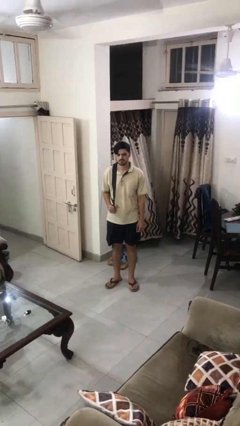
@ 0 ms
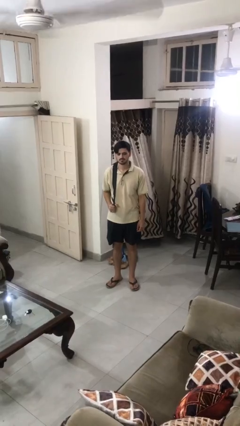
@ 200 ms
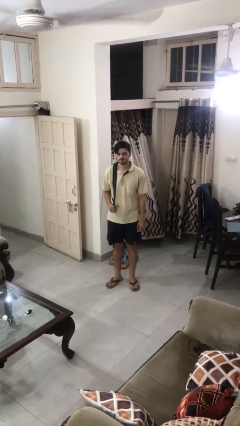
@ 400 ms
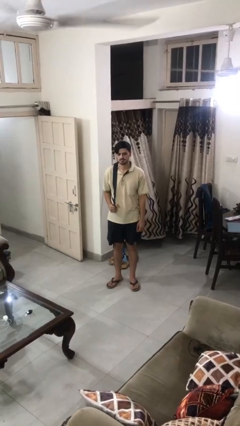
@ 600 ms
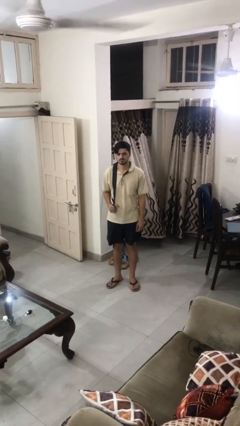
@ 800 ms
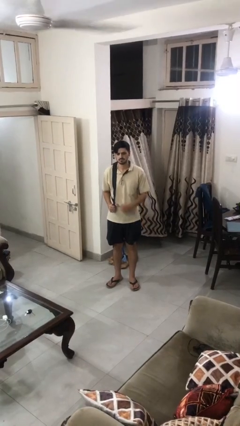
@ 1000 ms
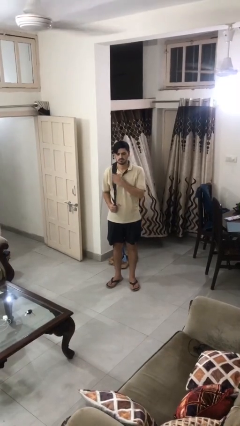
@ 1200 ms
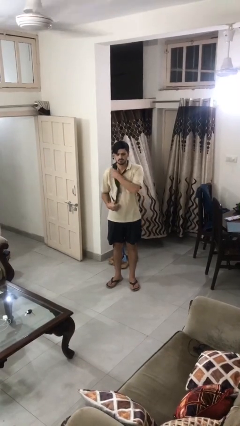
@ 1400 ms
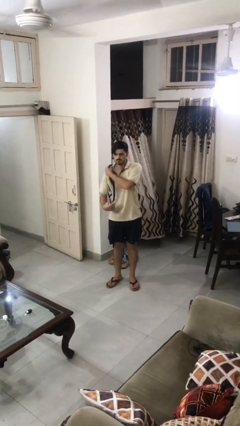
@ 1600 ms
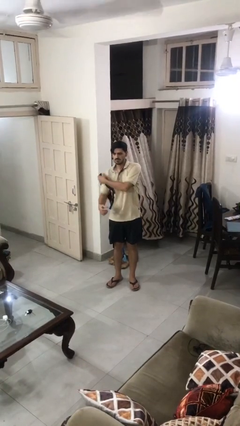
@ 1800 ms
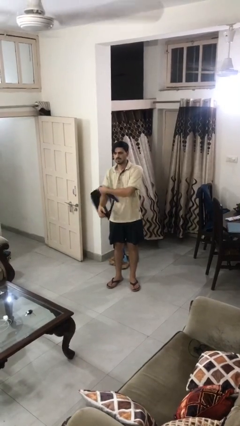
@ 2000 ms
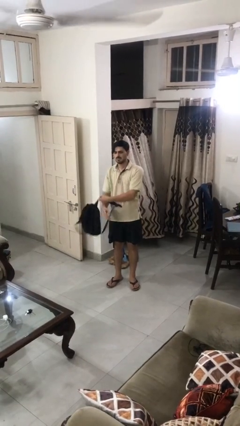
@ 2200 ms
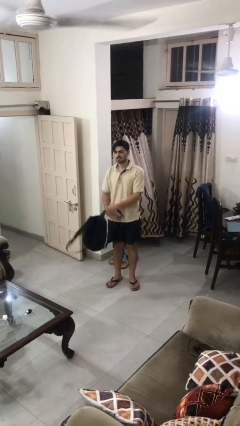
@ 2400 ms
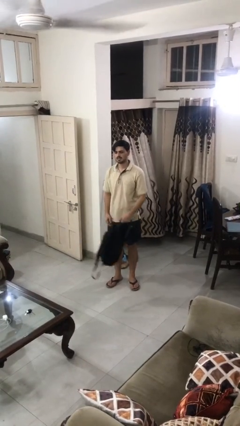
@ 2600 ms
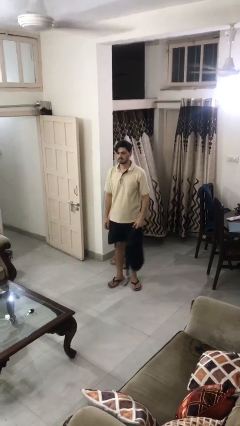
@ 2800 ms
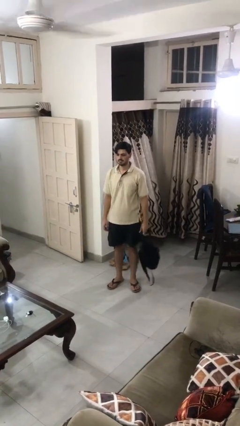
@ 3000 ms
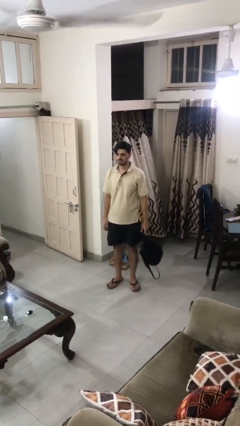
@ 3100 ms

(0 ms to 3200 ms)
person takes off backpack

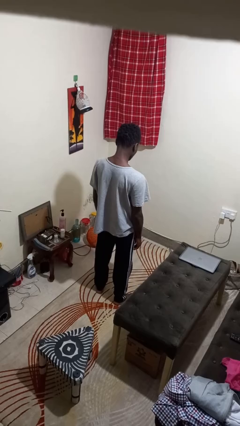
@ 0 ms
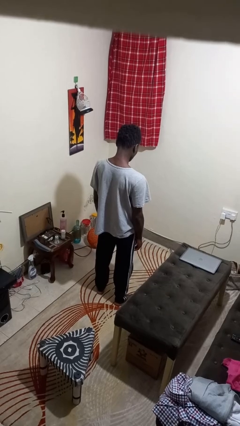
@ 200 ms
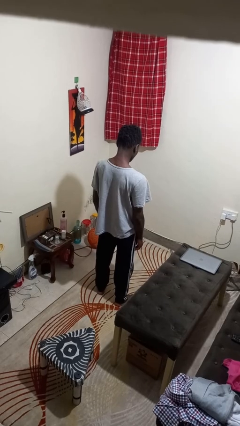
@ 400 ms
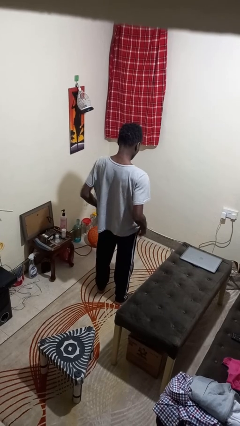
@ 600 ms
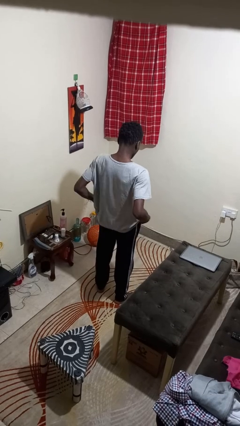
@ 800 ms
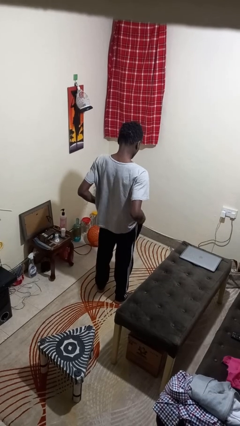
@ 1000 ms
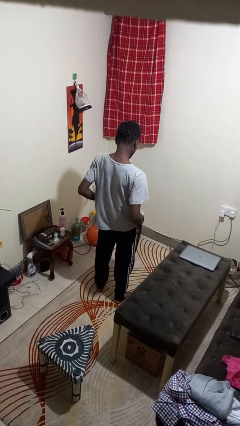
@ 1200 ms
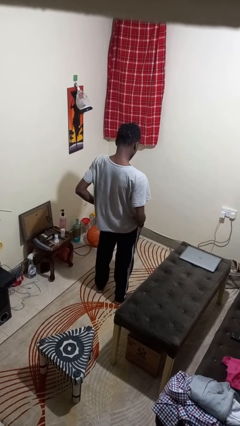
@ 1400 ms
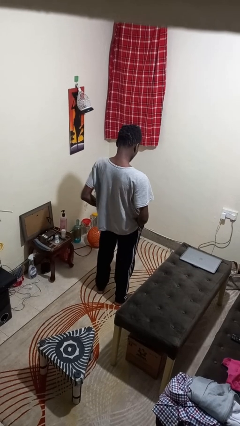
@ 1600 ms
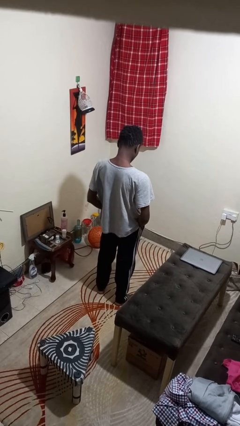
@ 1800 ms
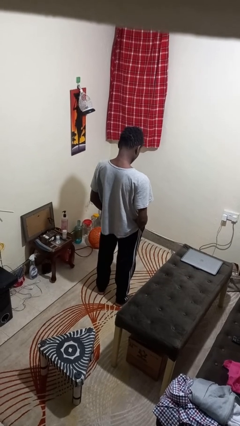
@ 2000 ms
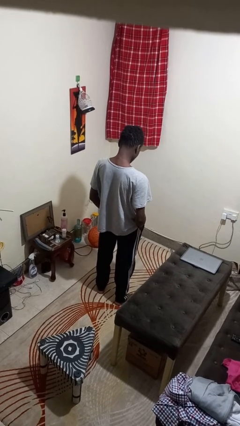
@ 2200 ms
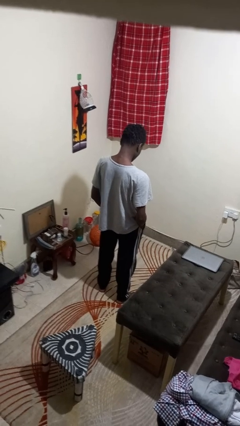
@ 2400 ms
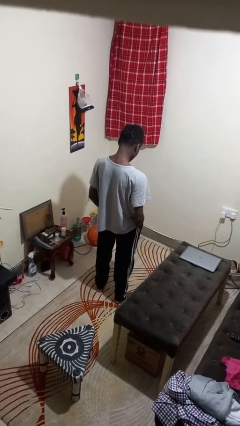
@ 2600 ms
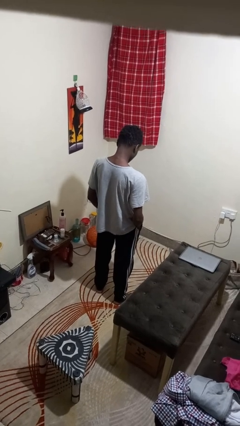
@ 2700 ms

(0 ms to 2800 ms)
person puts hands in back pockets

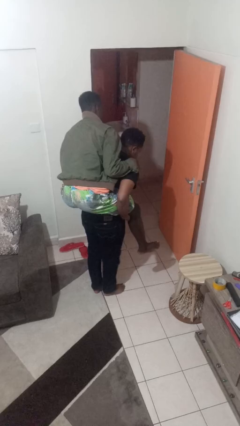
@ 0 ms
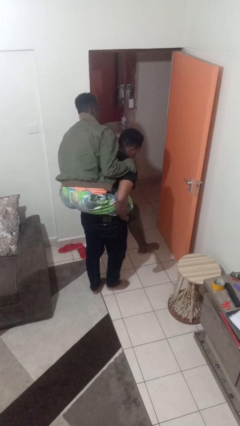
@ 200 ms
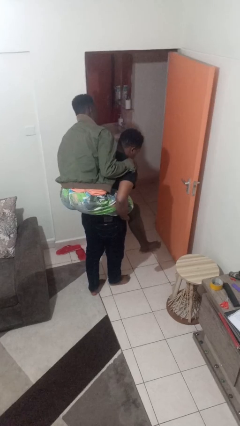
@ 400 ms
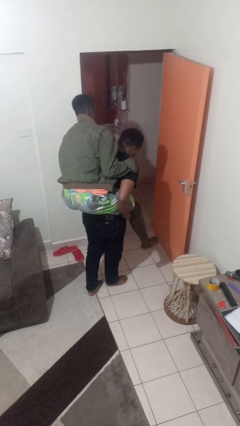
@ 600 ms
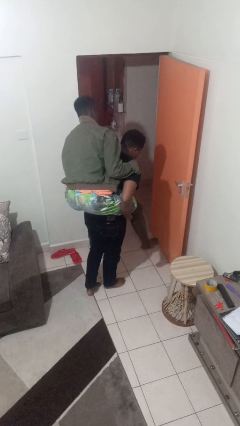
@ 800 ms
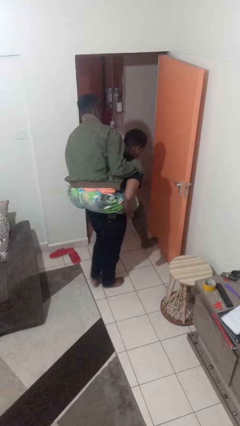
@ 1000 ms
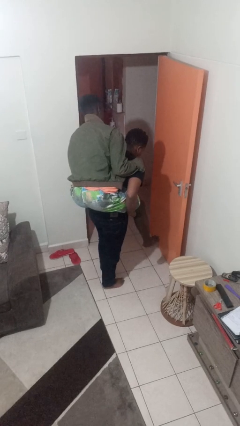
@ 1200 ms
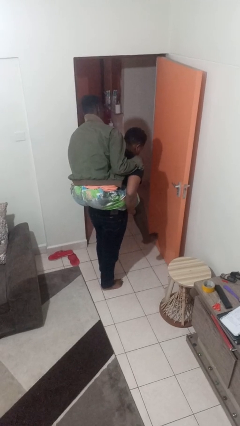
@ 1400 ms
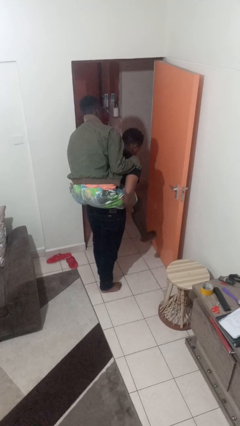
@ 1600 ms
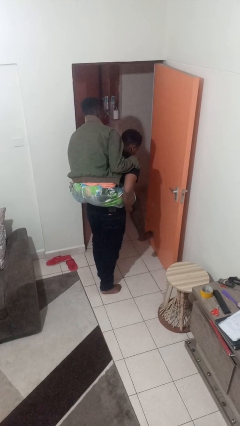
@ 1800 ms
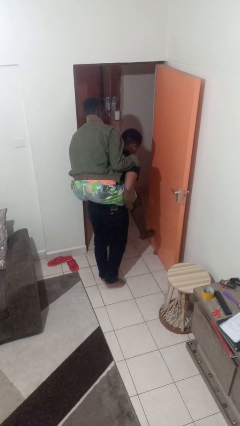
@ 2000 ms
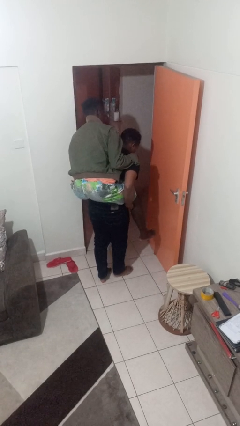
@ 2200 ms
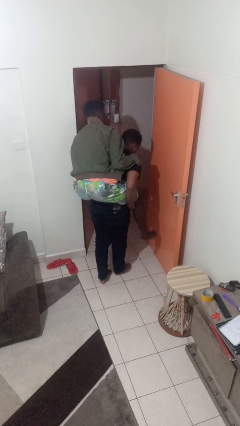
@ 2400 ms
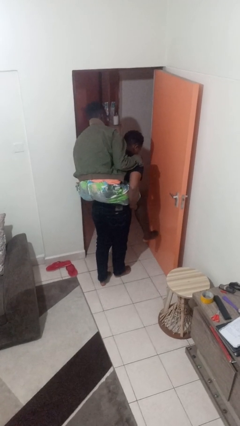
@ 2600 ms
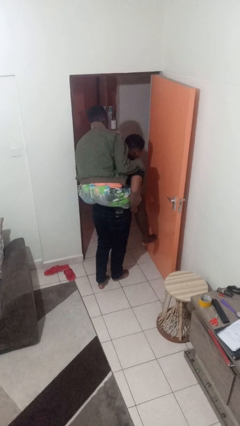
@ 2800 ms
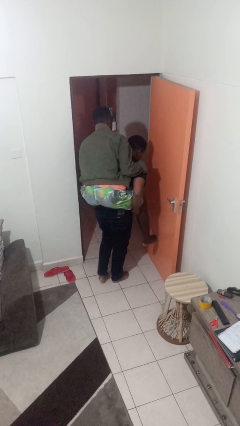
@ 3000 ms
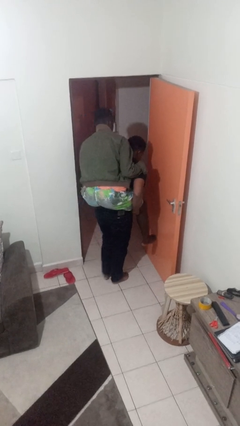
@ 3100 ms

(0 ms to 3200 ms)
person carries person on back

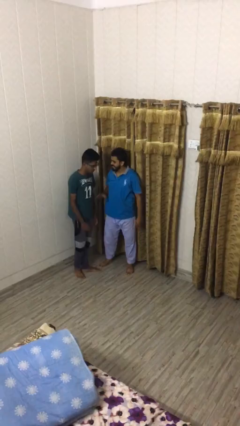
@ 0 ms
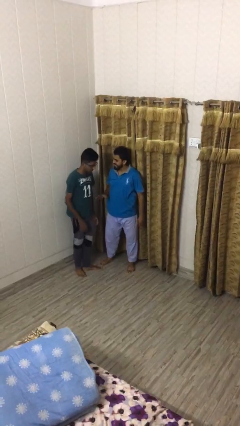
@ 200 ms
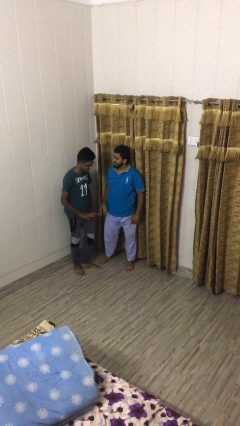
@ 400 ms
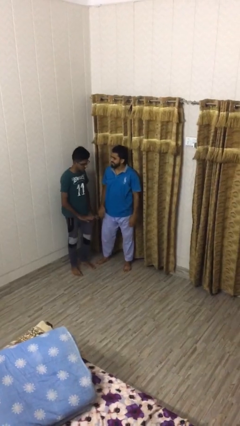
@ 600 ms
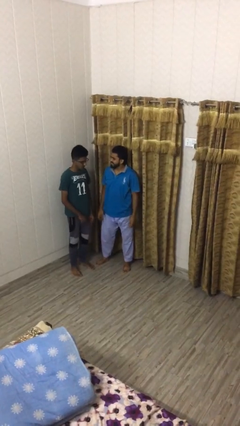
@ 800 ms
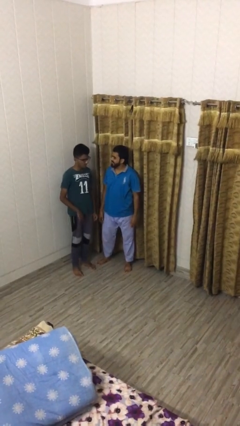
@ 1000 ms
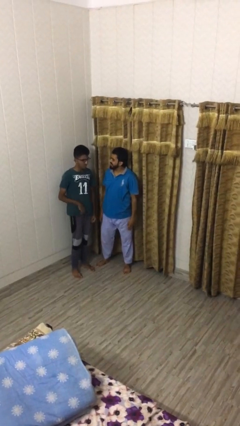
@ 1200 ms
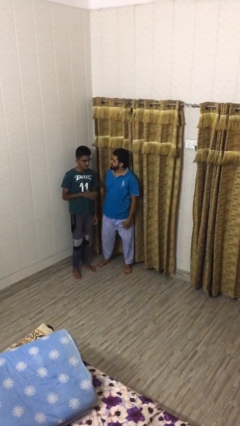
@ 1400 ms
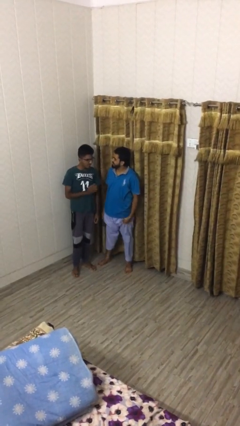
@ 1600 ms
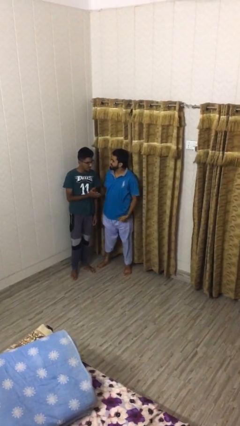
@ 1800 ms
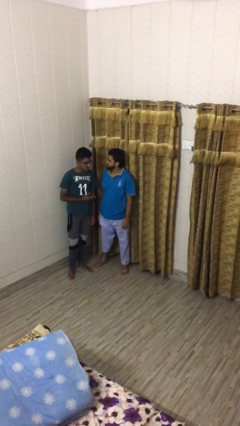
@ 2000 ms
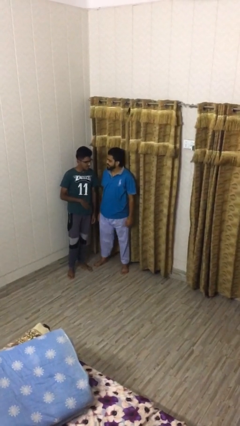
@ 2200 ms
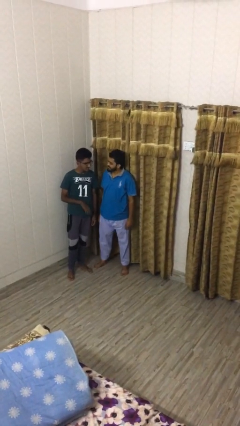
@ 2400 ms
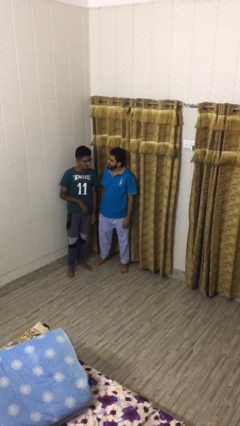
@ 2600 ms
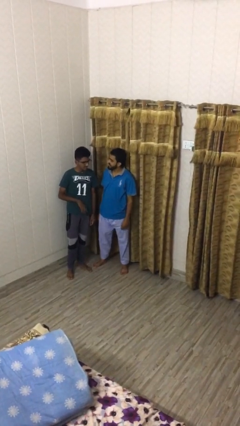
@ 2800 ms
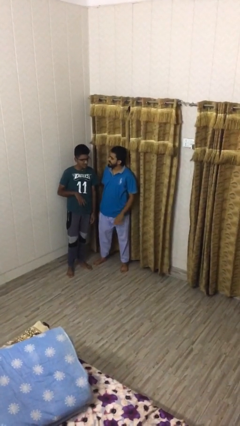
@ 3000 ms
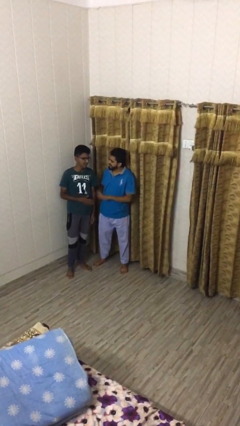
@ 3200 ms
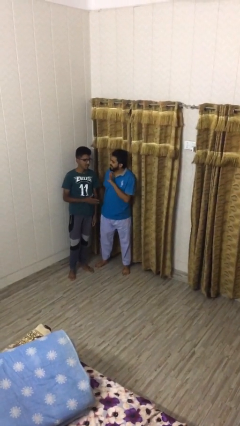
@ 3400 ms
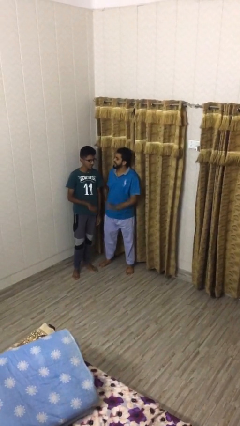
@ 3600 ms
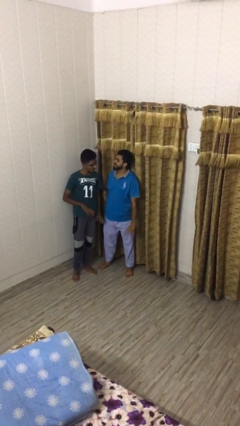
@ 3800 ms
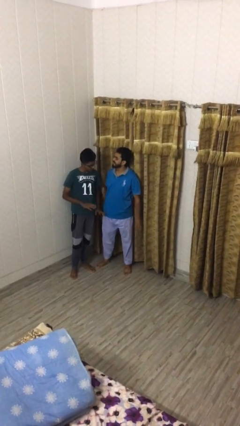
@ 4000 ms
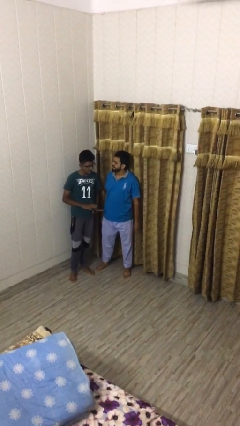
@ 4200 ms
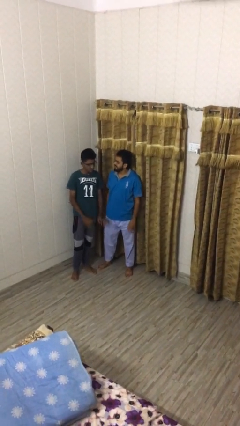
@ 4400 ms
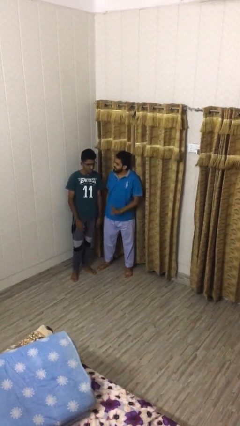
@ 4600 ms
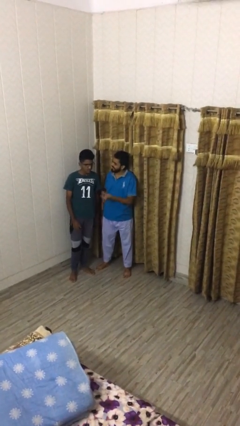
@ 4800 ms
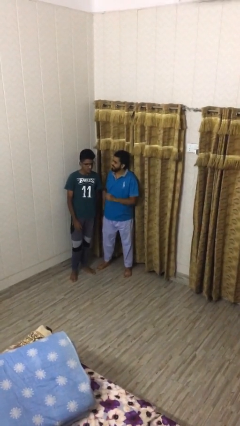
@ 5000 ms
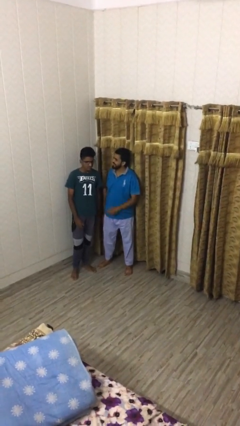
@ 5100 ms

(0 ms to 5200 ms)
person talks to person

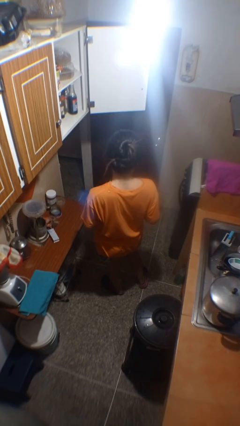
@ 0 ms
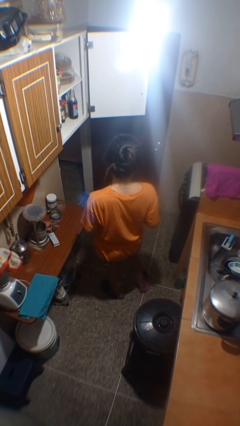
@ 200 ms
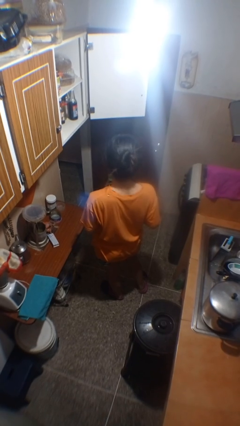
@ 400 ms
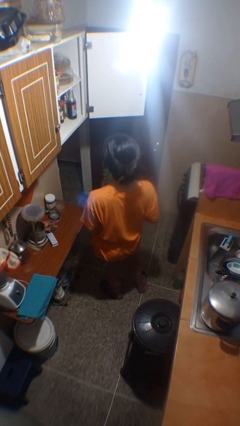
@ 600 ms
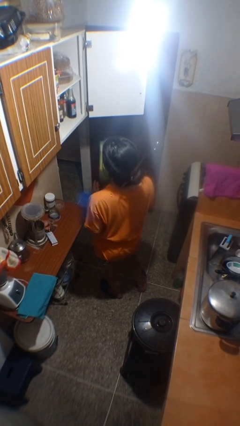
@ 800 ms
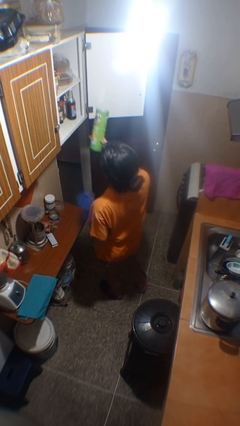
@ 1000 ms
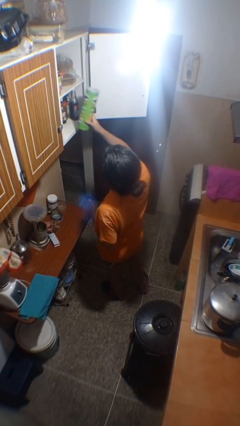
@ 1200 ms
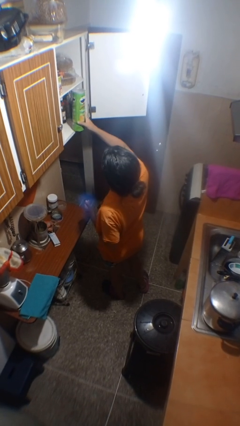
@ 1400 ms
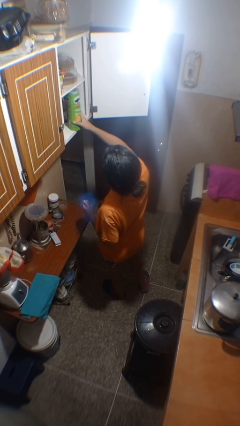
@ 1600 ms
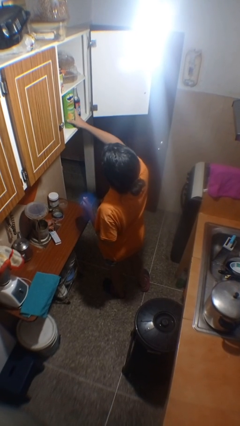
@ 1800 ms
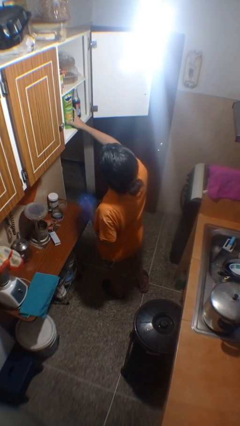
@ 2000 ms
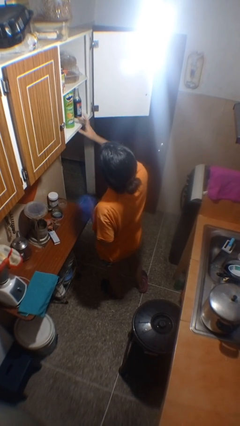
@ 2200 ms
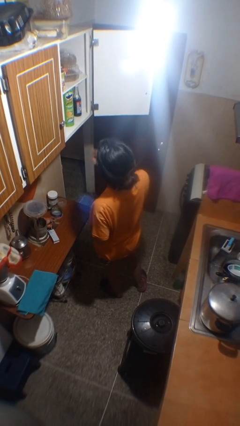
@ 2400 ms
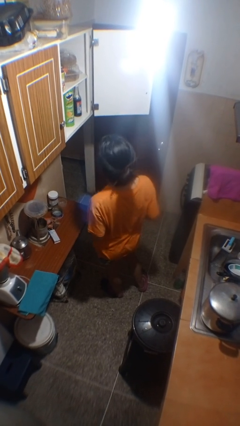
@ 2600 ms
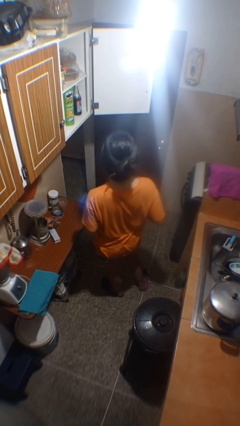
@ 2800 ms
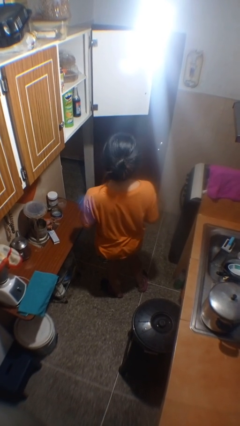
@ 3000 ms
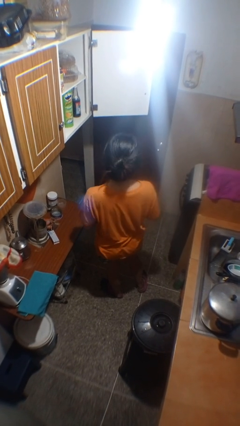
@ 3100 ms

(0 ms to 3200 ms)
person puts object in cabinet
